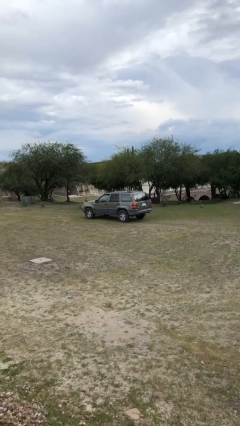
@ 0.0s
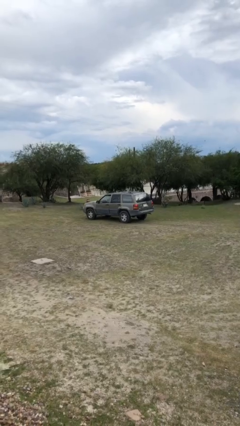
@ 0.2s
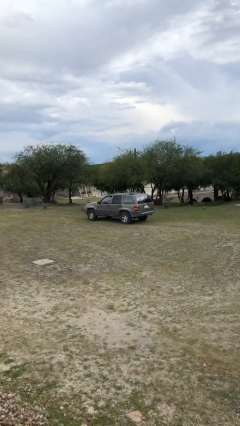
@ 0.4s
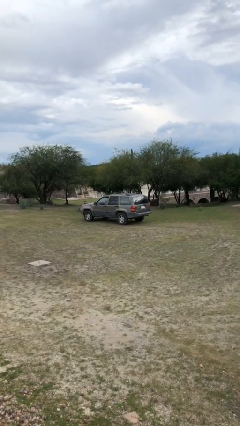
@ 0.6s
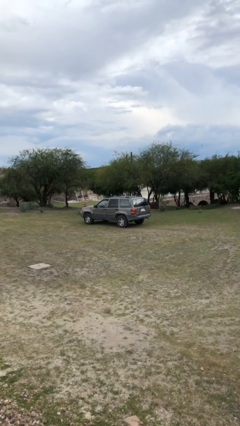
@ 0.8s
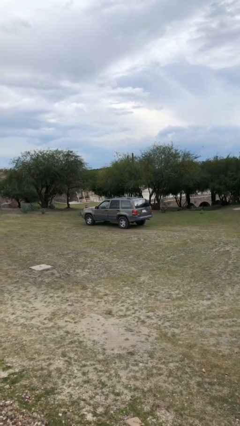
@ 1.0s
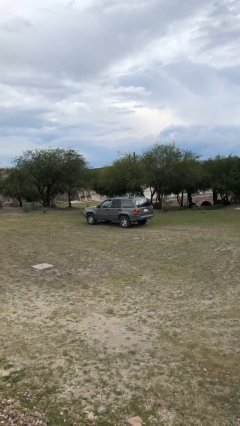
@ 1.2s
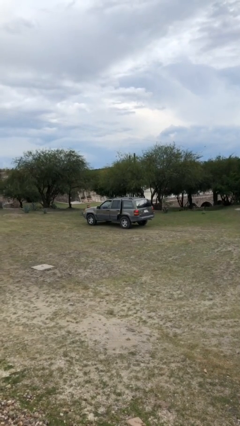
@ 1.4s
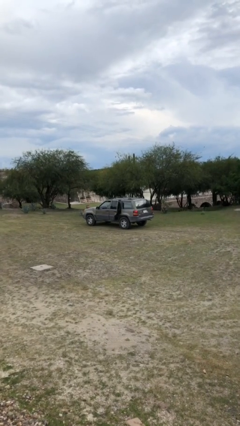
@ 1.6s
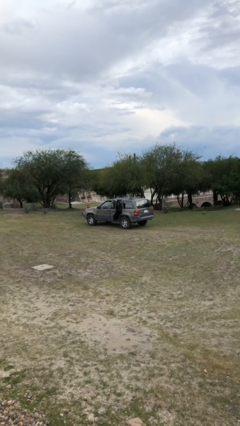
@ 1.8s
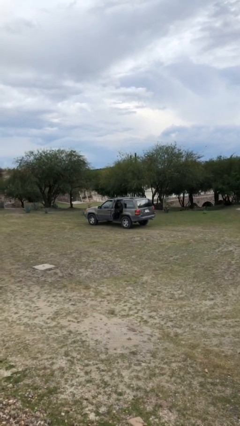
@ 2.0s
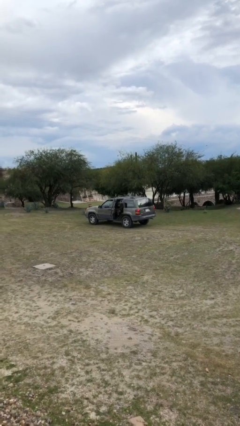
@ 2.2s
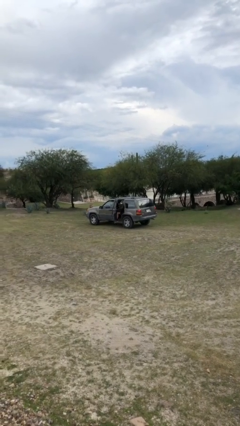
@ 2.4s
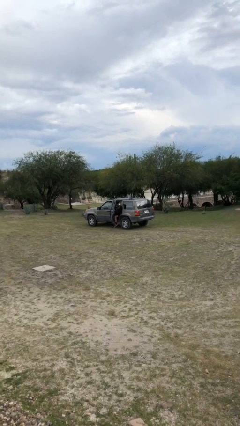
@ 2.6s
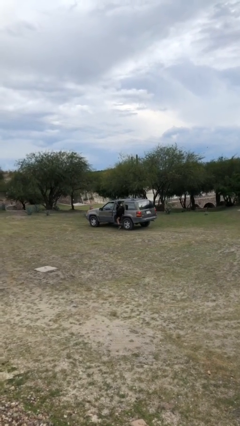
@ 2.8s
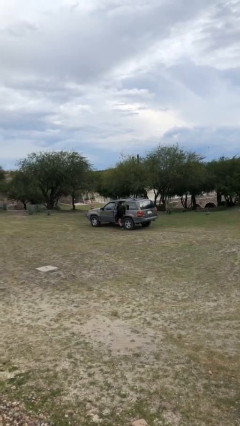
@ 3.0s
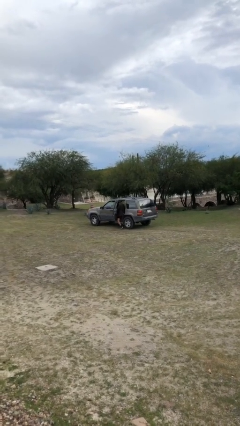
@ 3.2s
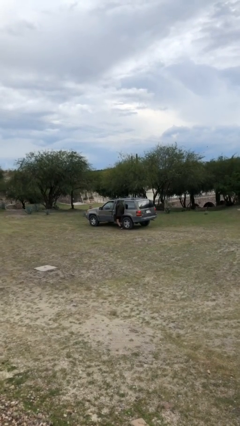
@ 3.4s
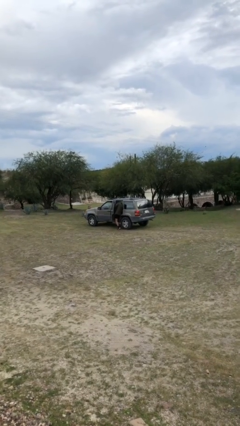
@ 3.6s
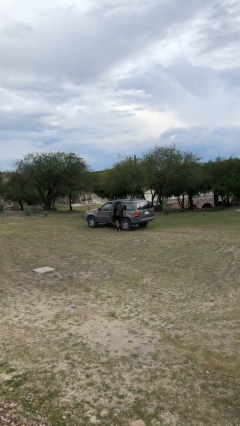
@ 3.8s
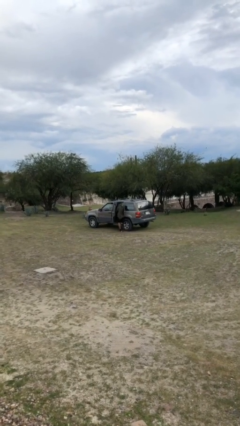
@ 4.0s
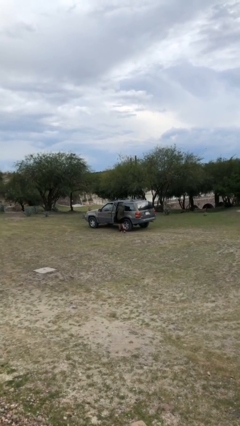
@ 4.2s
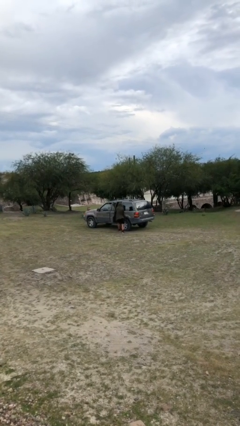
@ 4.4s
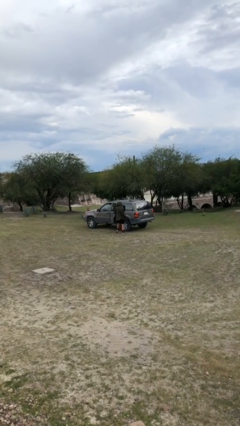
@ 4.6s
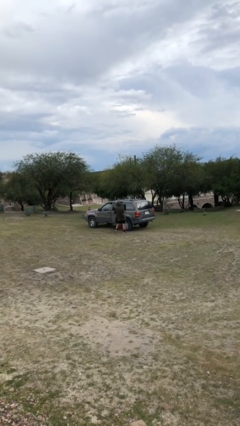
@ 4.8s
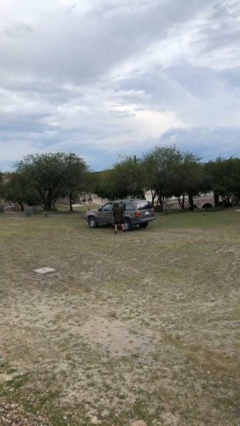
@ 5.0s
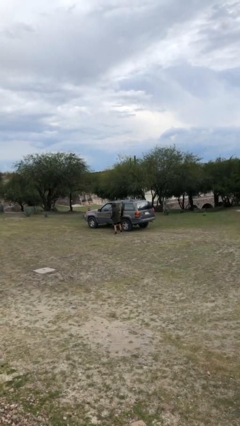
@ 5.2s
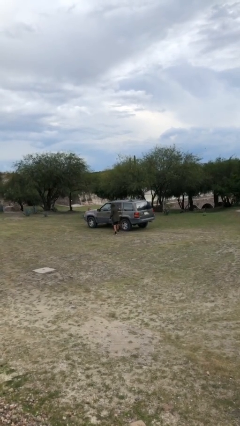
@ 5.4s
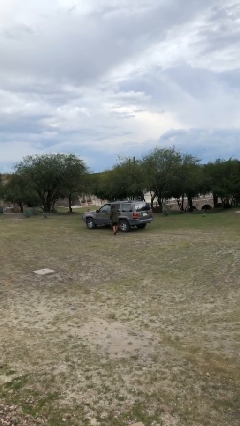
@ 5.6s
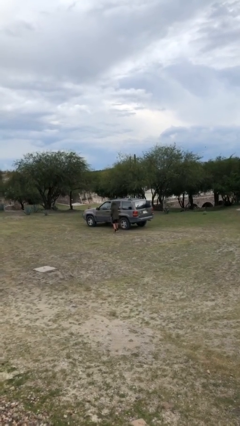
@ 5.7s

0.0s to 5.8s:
car drops off person

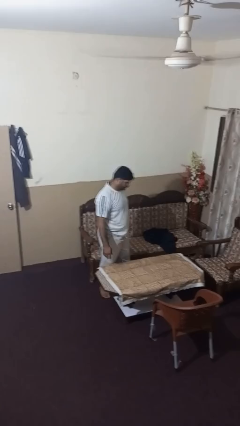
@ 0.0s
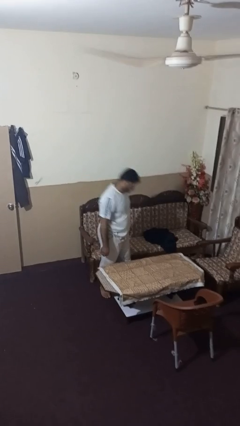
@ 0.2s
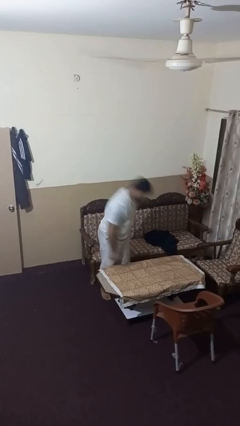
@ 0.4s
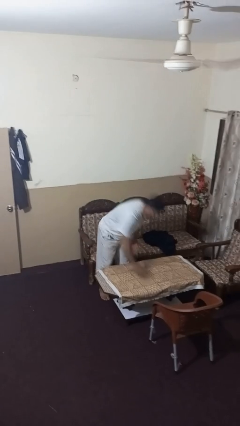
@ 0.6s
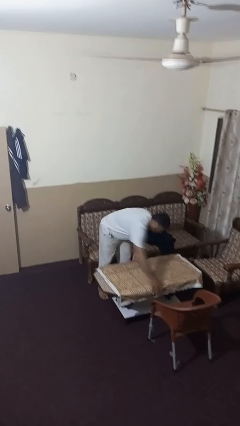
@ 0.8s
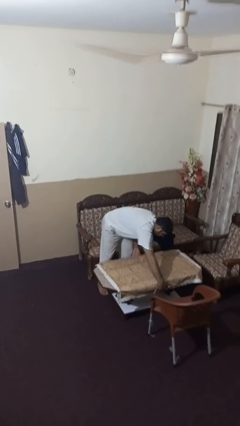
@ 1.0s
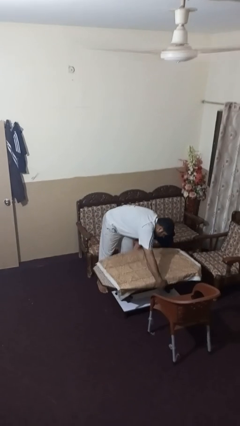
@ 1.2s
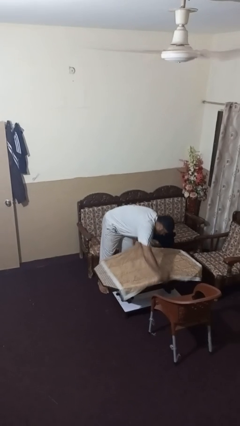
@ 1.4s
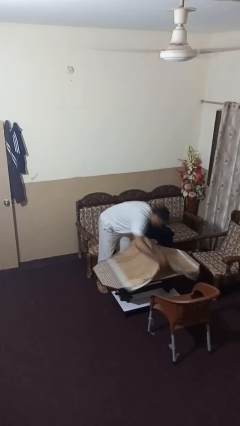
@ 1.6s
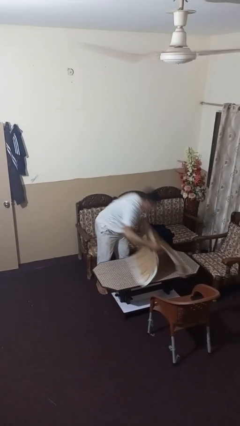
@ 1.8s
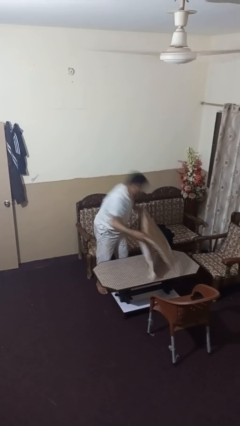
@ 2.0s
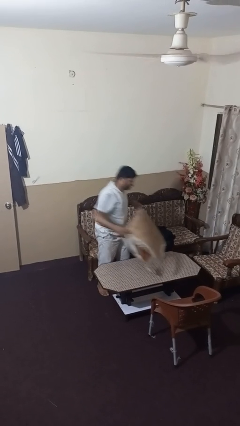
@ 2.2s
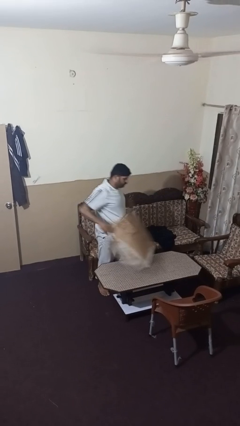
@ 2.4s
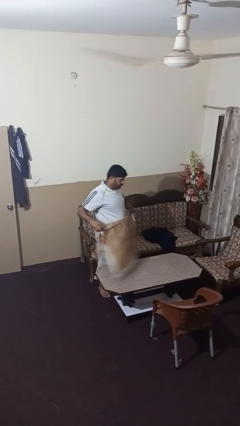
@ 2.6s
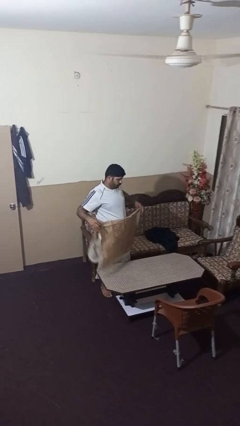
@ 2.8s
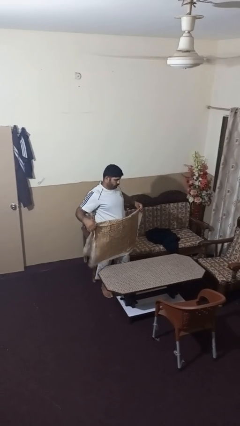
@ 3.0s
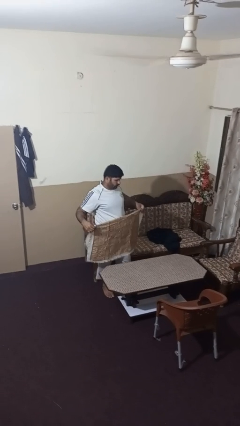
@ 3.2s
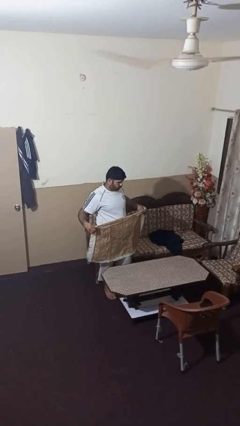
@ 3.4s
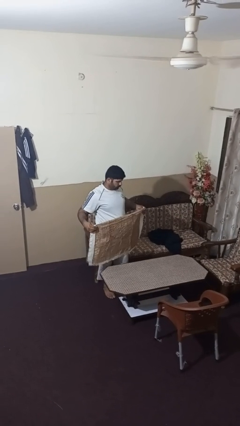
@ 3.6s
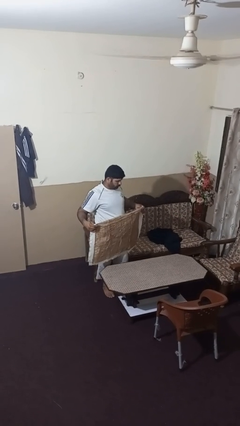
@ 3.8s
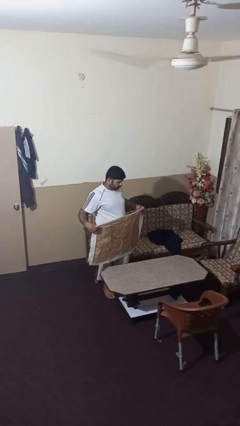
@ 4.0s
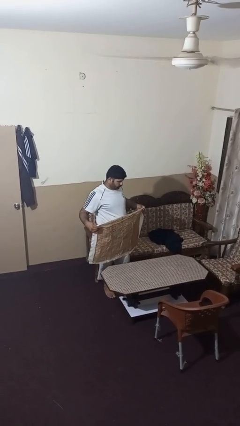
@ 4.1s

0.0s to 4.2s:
person folds tablecloth

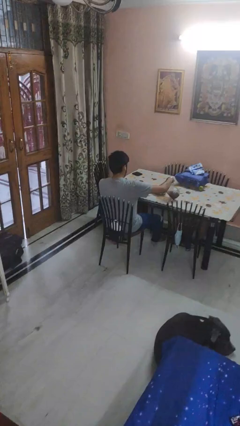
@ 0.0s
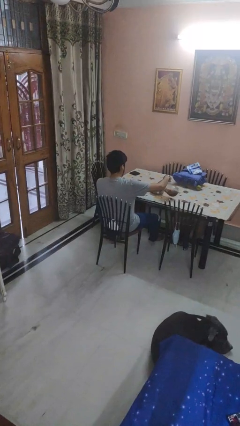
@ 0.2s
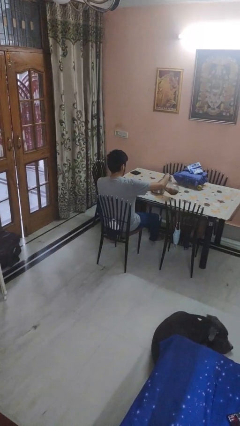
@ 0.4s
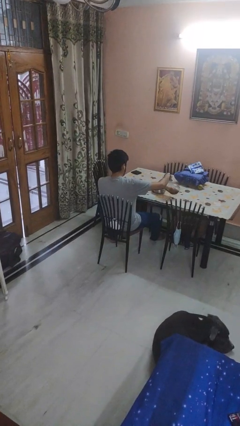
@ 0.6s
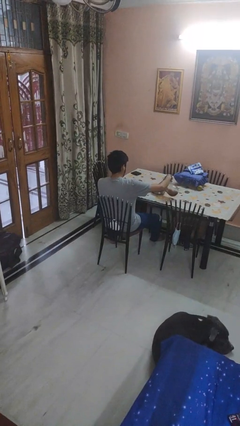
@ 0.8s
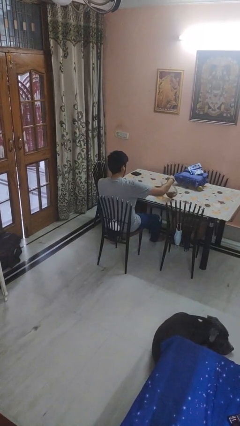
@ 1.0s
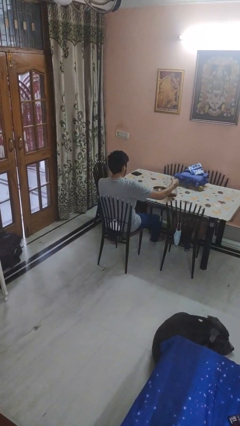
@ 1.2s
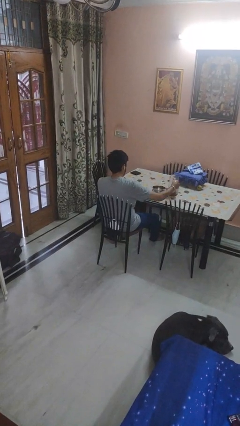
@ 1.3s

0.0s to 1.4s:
person pours into bowl

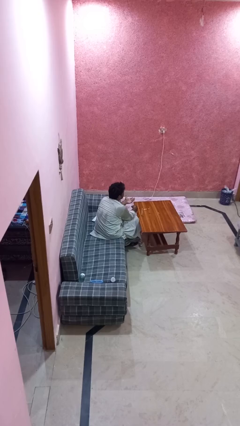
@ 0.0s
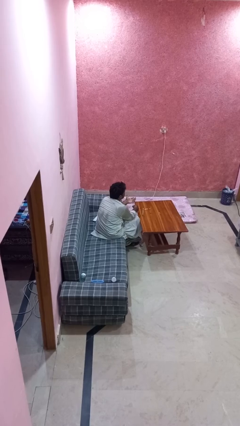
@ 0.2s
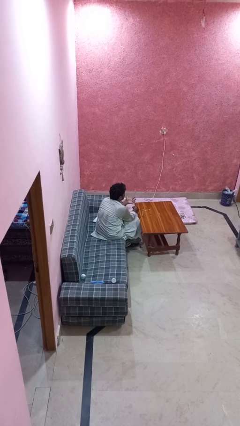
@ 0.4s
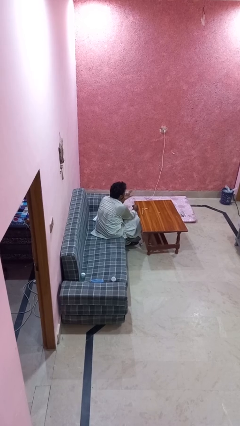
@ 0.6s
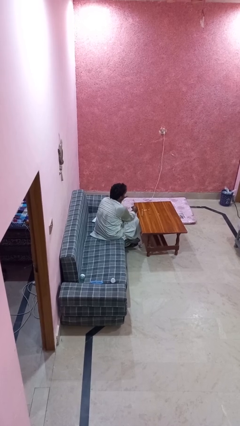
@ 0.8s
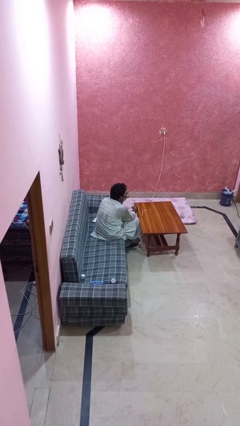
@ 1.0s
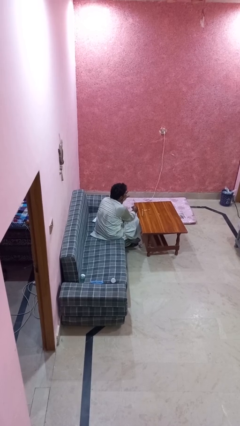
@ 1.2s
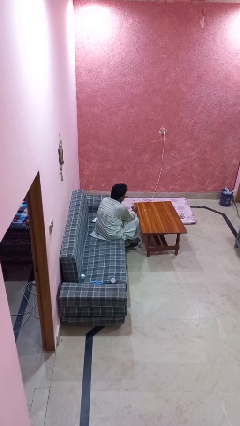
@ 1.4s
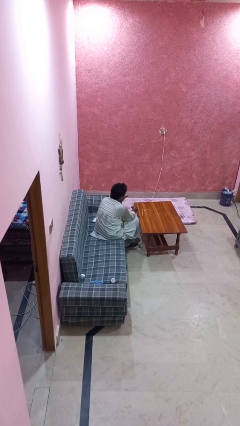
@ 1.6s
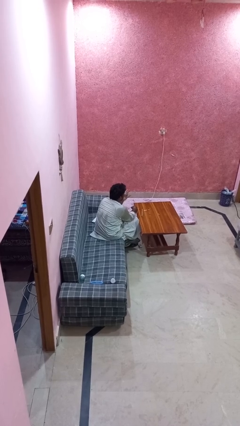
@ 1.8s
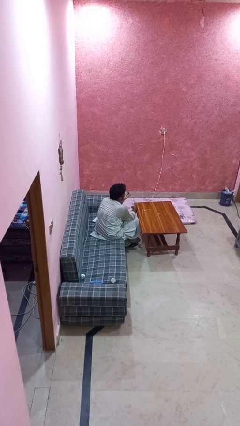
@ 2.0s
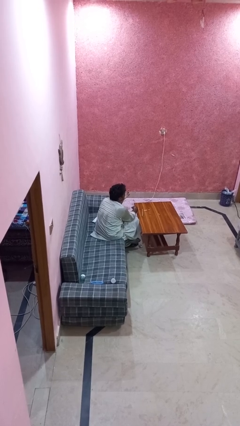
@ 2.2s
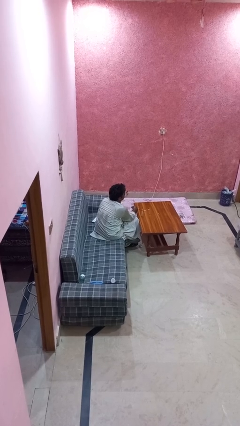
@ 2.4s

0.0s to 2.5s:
person licks fingers

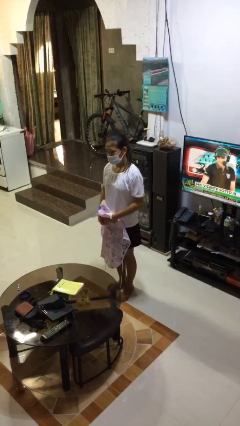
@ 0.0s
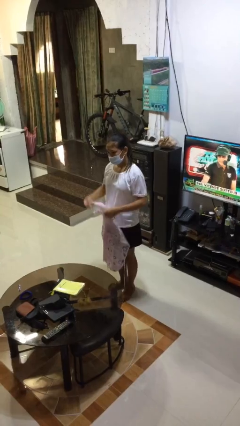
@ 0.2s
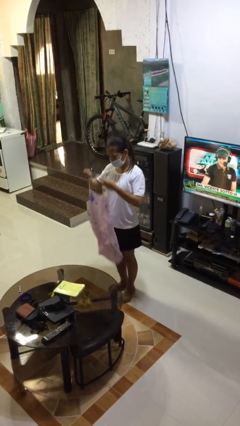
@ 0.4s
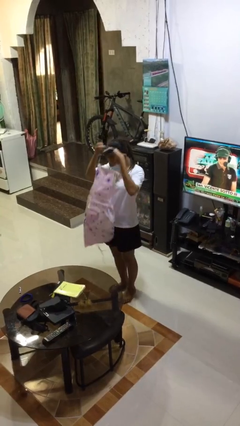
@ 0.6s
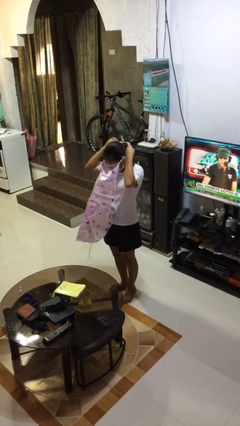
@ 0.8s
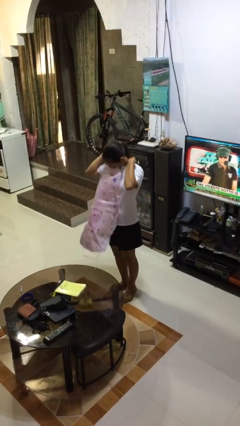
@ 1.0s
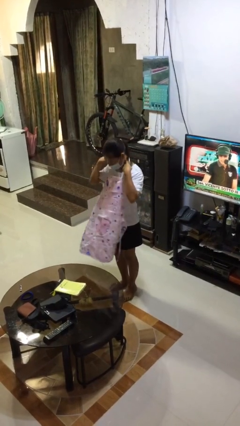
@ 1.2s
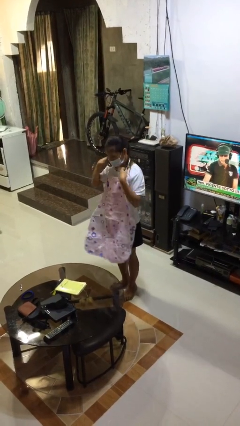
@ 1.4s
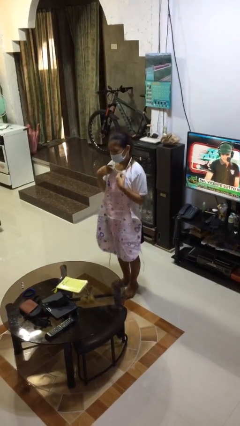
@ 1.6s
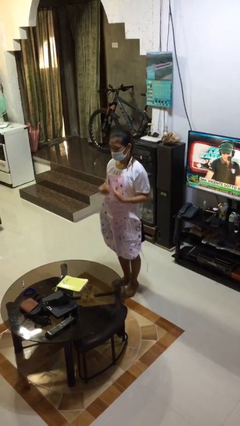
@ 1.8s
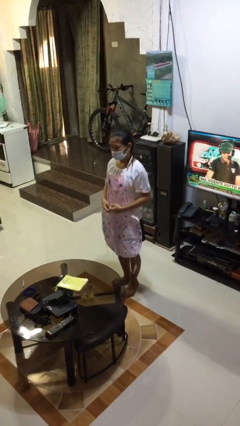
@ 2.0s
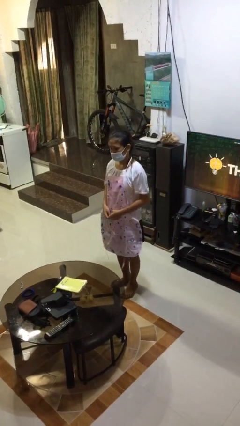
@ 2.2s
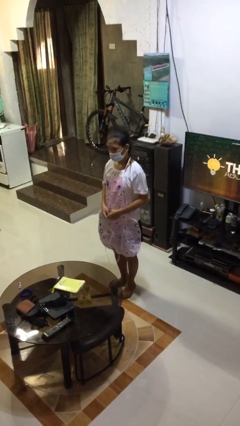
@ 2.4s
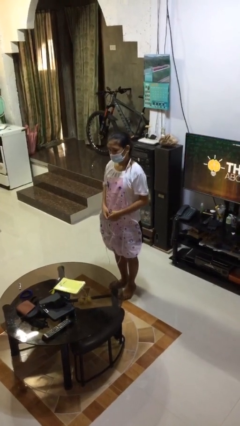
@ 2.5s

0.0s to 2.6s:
person puts on apron

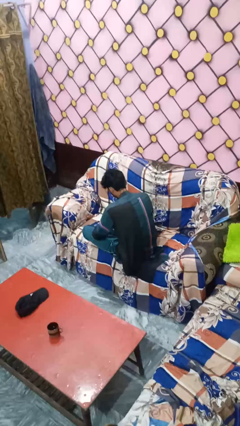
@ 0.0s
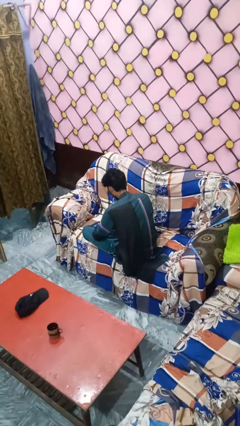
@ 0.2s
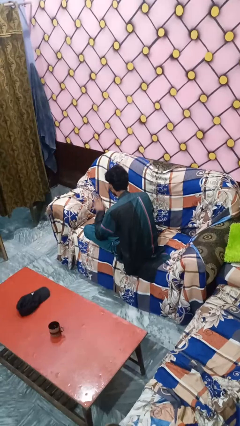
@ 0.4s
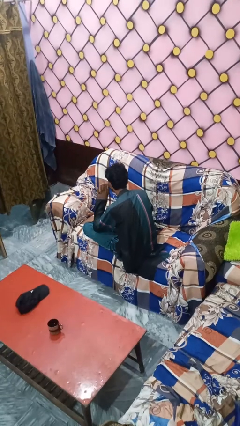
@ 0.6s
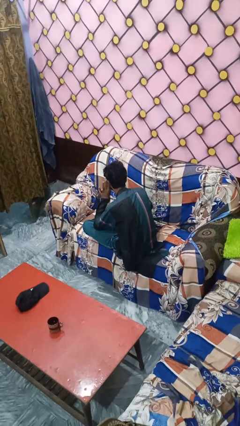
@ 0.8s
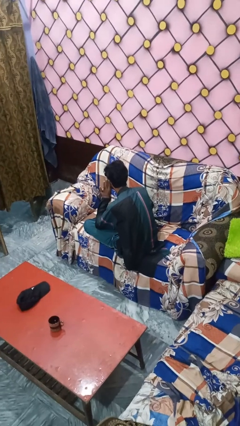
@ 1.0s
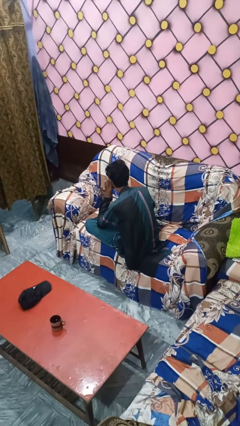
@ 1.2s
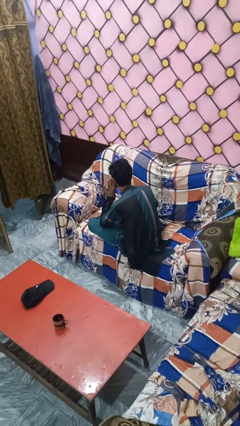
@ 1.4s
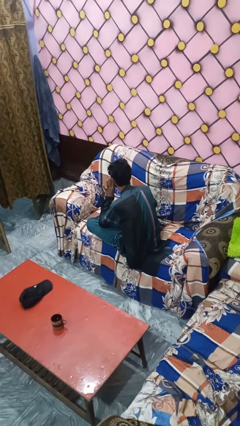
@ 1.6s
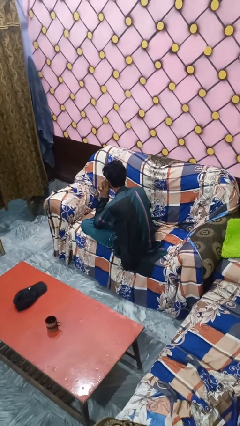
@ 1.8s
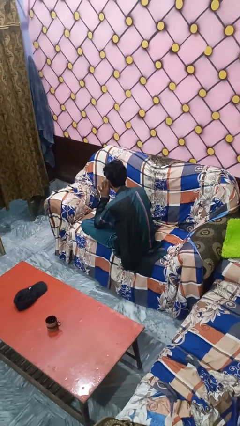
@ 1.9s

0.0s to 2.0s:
person gestures listen closely
